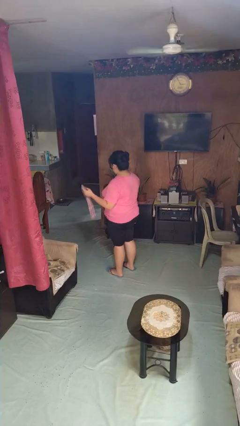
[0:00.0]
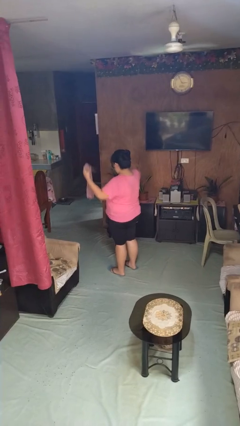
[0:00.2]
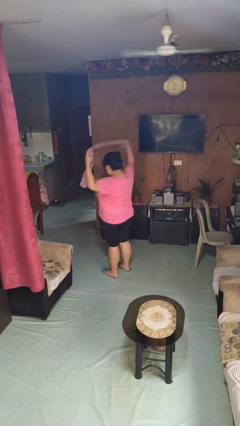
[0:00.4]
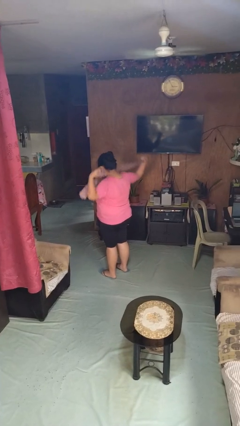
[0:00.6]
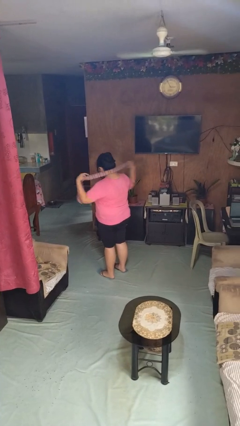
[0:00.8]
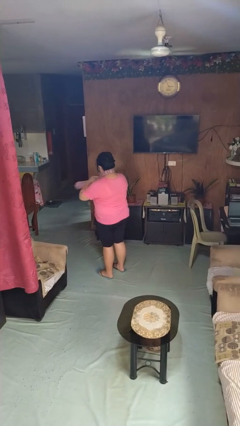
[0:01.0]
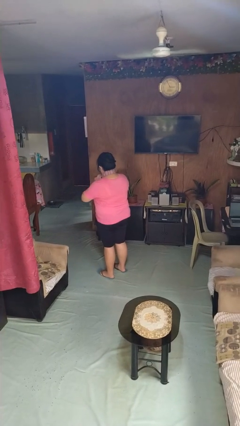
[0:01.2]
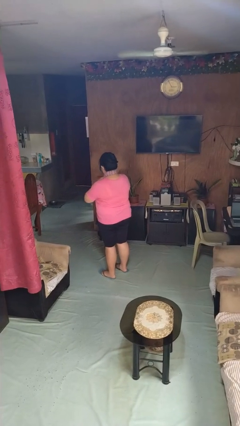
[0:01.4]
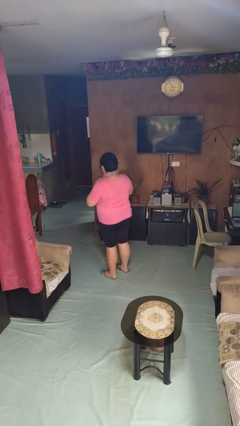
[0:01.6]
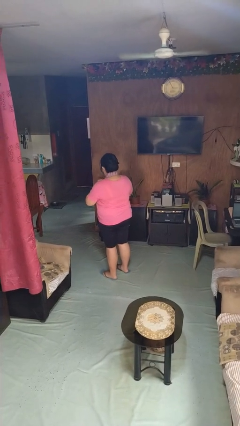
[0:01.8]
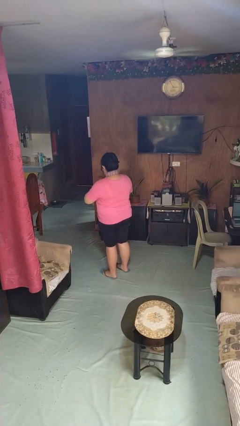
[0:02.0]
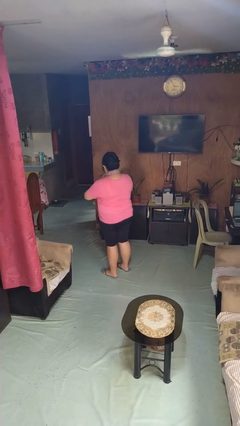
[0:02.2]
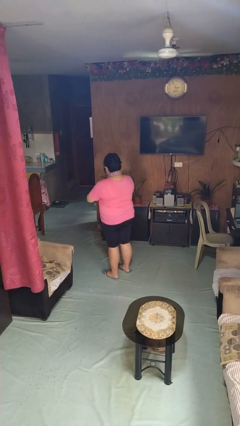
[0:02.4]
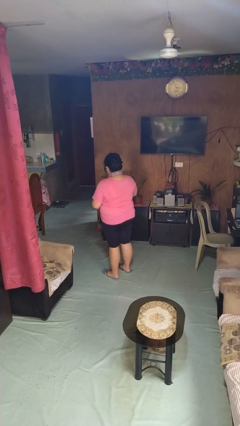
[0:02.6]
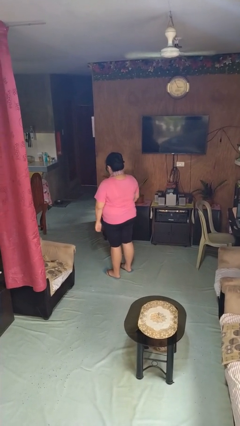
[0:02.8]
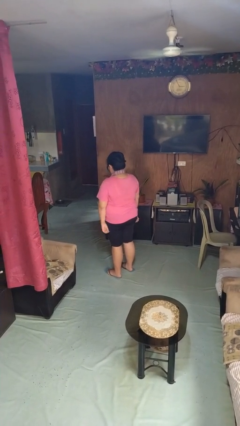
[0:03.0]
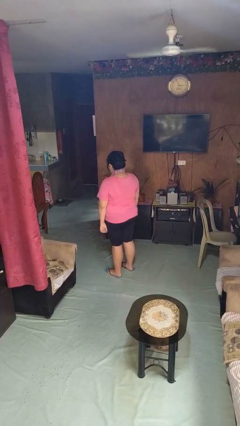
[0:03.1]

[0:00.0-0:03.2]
person puts on necktie

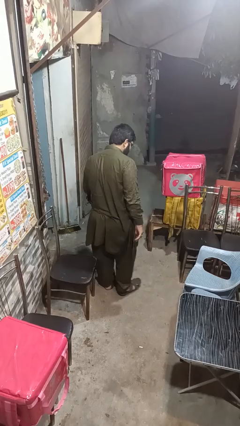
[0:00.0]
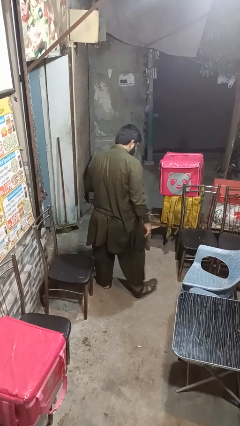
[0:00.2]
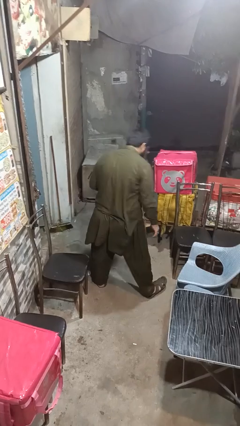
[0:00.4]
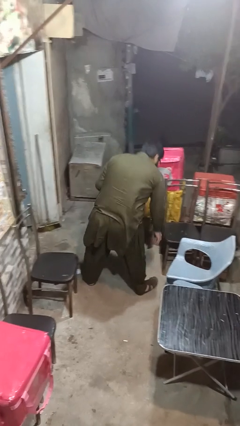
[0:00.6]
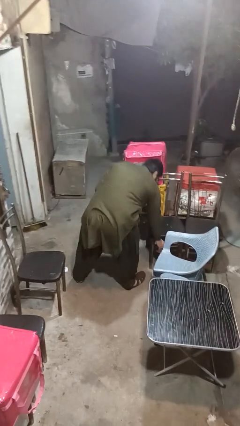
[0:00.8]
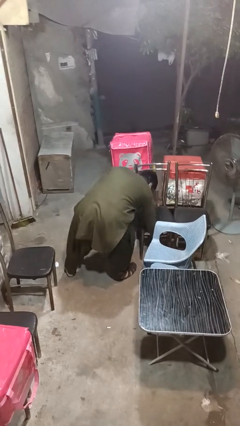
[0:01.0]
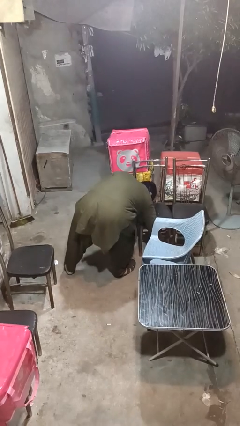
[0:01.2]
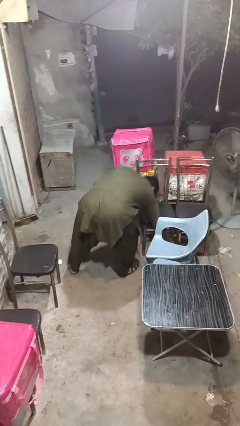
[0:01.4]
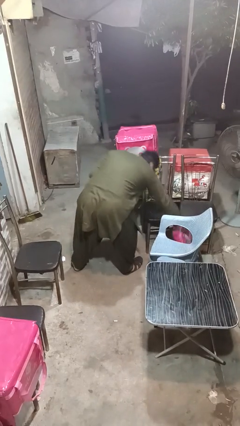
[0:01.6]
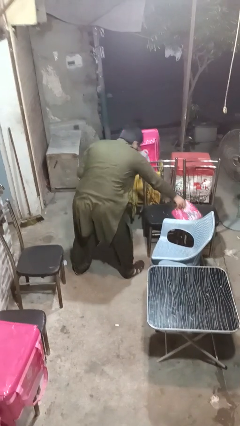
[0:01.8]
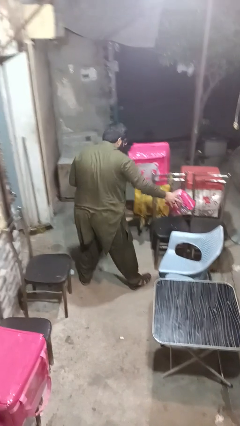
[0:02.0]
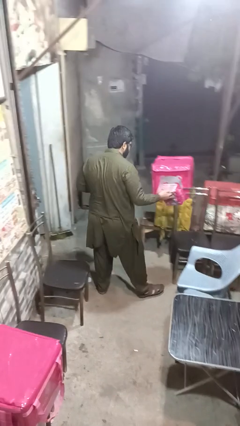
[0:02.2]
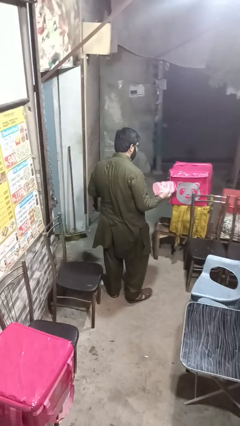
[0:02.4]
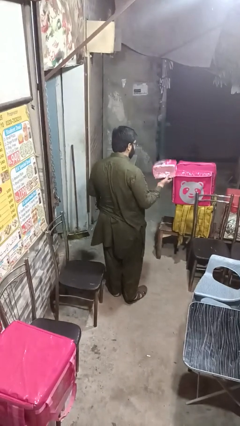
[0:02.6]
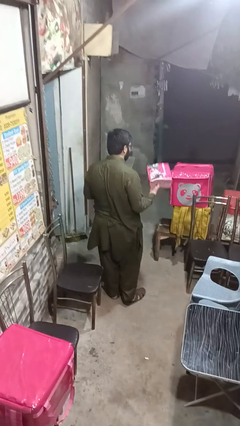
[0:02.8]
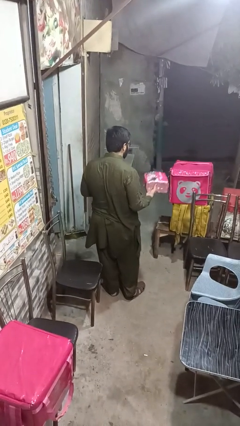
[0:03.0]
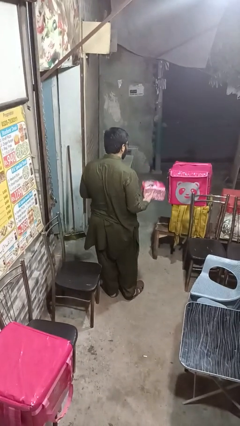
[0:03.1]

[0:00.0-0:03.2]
person picks up object from floor

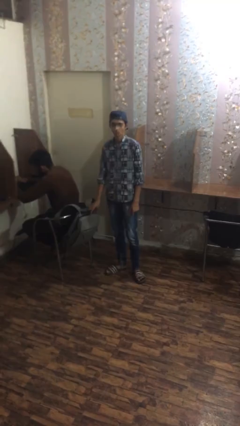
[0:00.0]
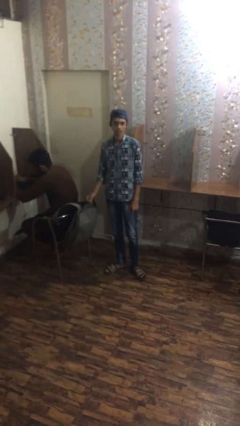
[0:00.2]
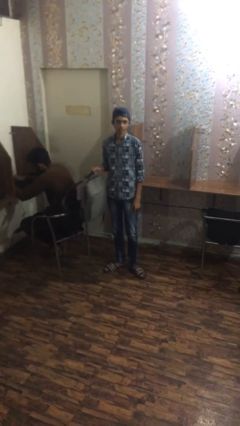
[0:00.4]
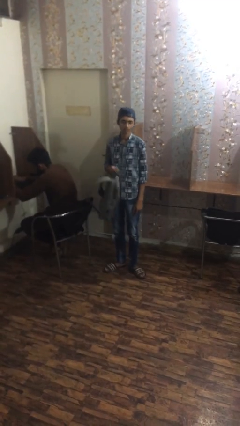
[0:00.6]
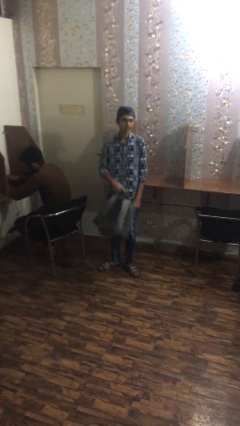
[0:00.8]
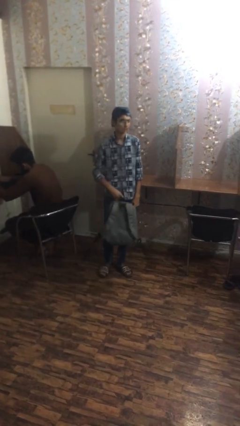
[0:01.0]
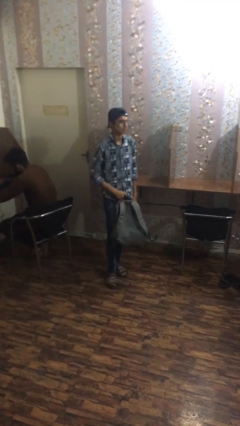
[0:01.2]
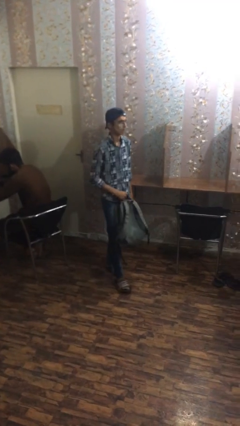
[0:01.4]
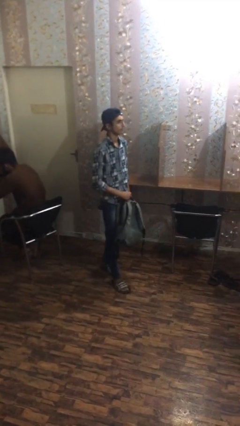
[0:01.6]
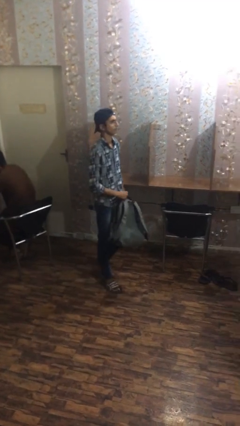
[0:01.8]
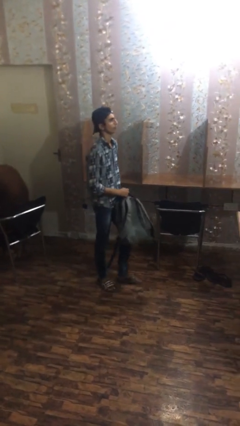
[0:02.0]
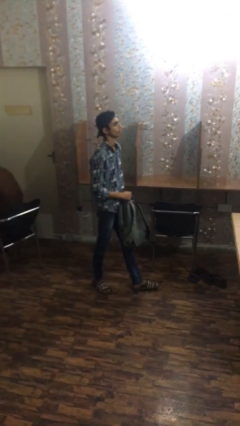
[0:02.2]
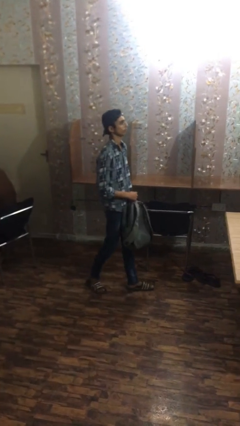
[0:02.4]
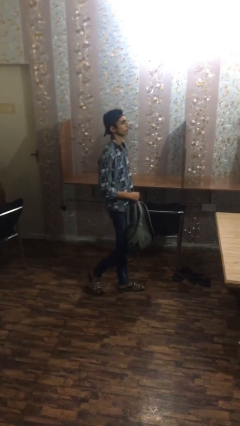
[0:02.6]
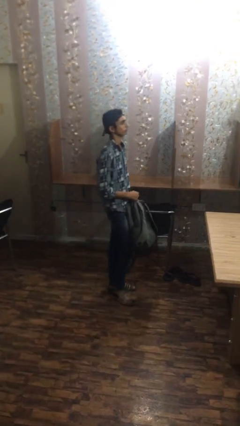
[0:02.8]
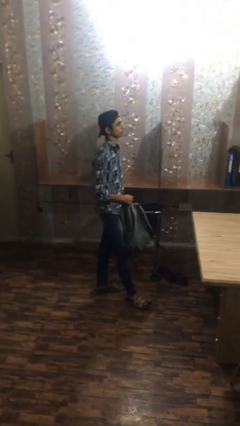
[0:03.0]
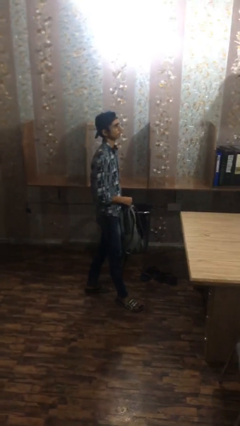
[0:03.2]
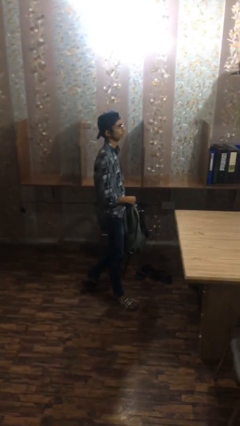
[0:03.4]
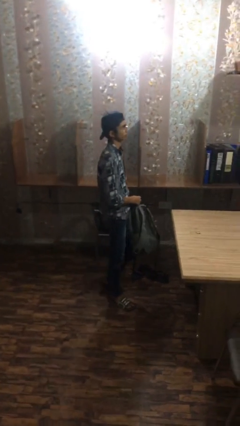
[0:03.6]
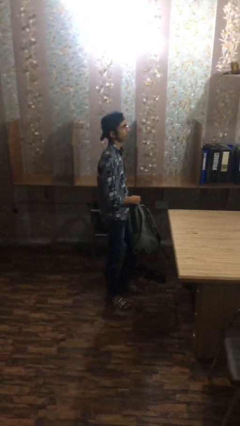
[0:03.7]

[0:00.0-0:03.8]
person steals object from person

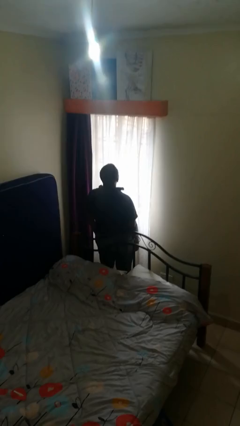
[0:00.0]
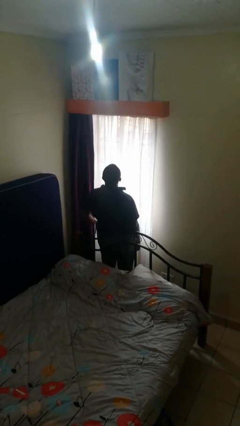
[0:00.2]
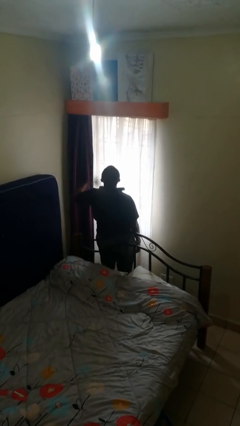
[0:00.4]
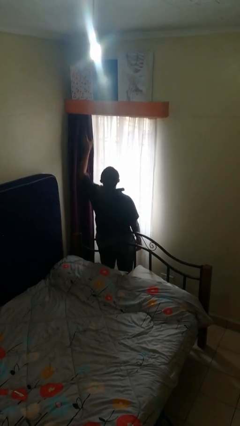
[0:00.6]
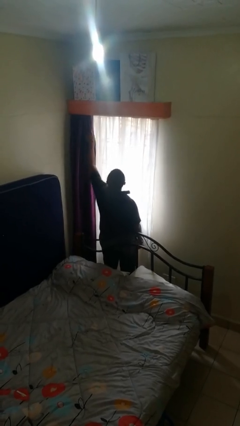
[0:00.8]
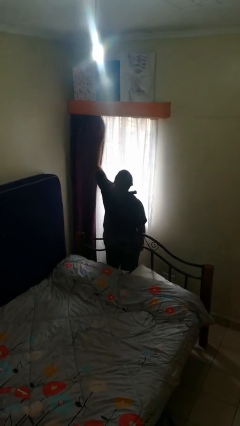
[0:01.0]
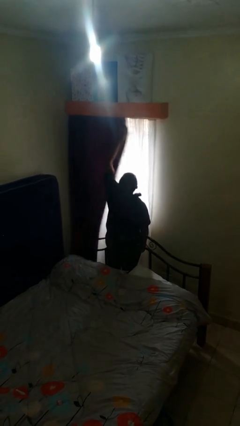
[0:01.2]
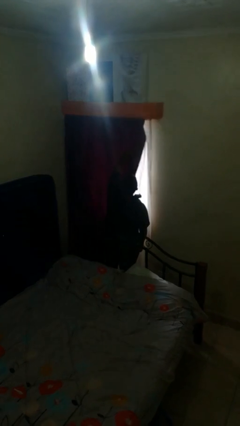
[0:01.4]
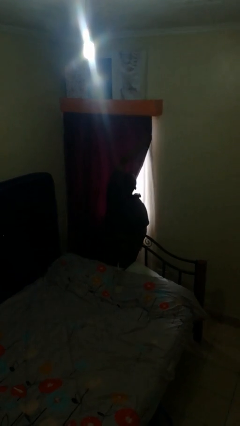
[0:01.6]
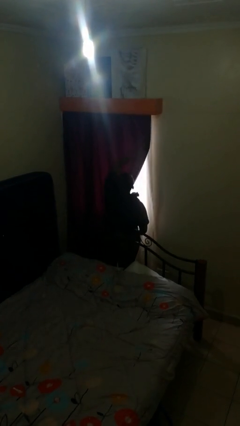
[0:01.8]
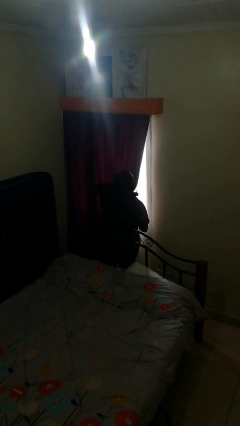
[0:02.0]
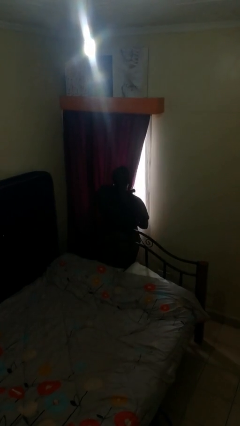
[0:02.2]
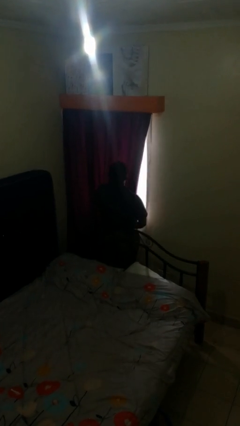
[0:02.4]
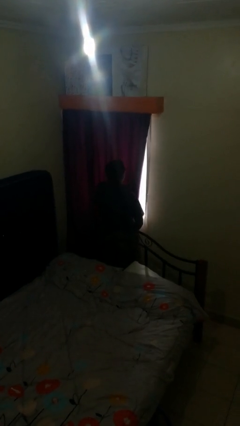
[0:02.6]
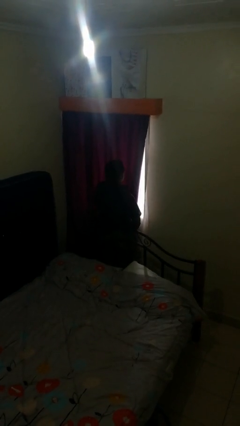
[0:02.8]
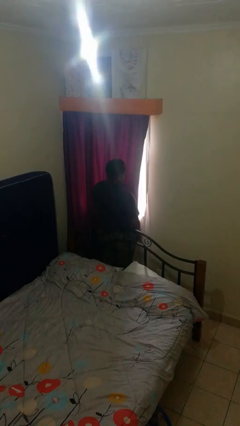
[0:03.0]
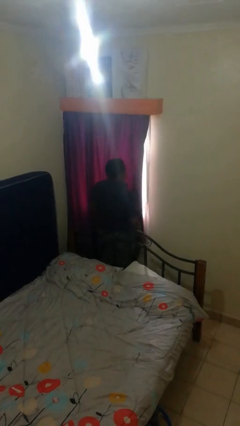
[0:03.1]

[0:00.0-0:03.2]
person closes curtains

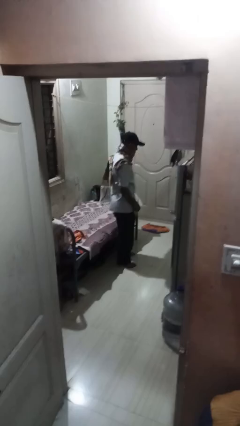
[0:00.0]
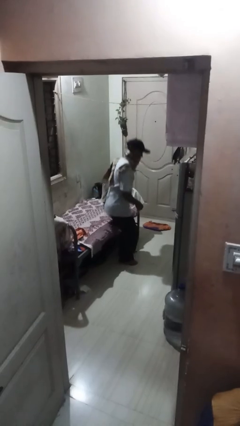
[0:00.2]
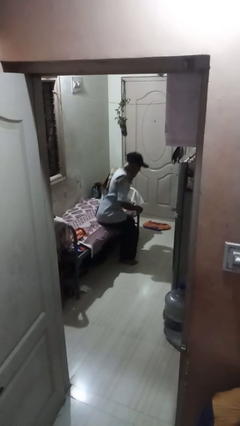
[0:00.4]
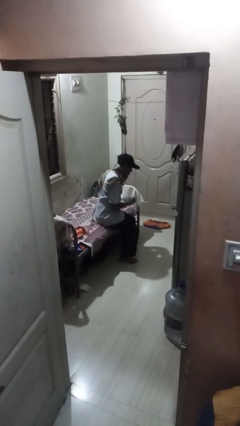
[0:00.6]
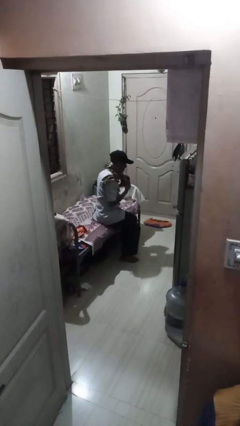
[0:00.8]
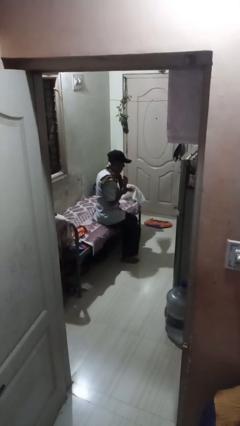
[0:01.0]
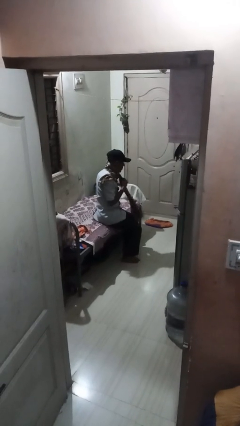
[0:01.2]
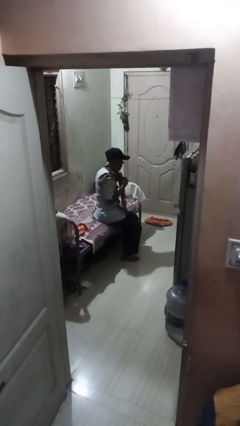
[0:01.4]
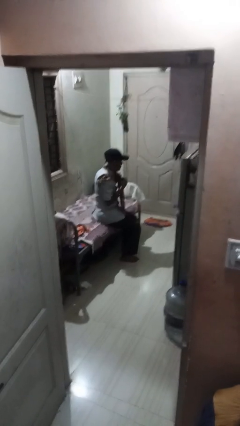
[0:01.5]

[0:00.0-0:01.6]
person puts on scarf

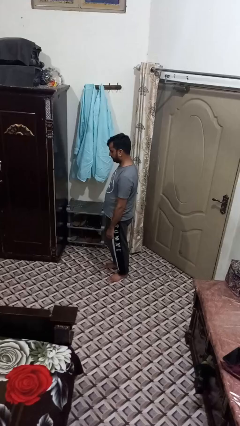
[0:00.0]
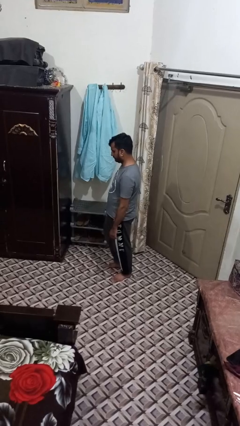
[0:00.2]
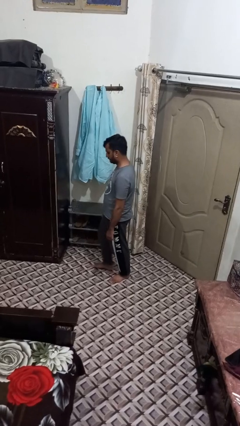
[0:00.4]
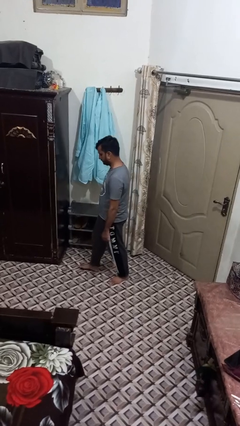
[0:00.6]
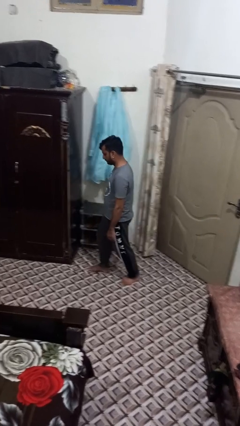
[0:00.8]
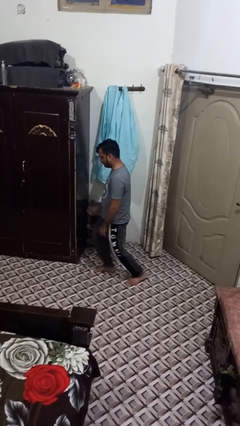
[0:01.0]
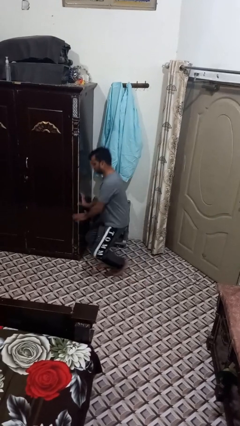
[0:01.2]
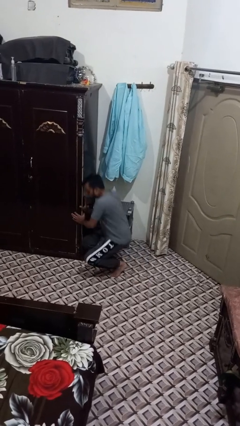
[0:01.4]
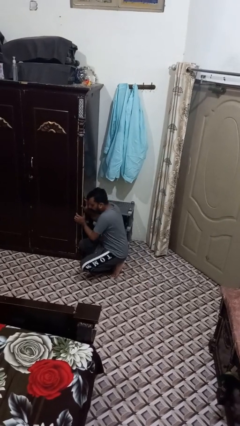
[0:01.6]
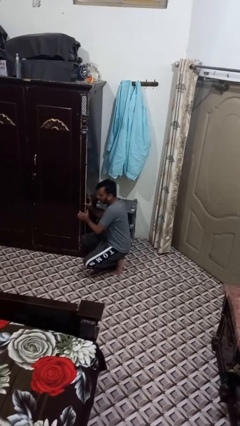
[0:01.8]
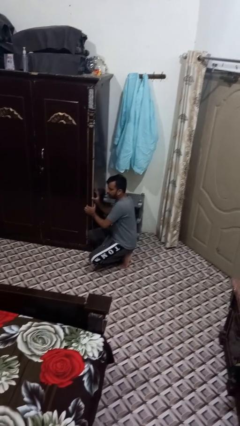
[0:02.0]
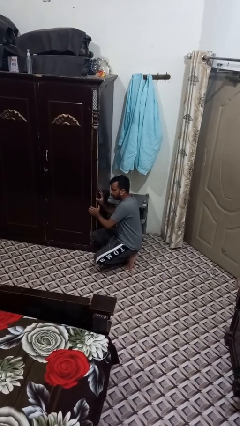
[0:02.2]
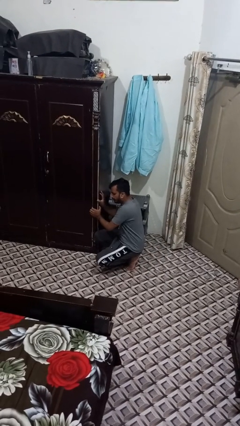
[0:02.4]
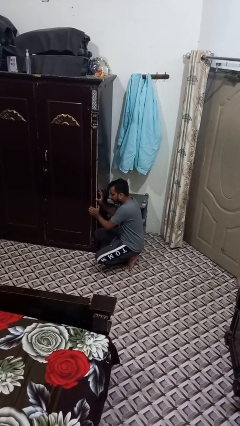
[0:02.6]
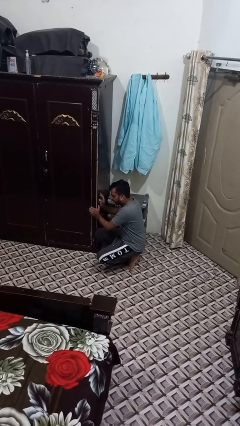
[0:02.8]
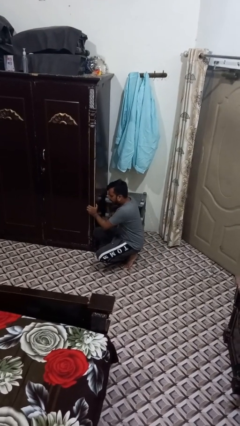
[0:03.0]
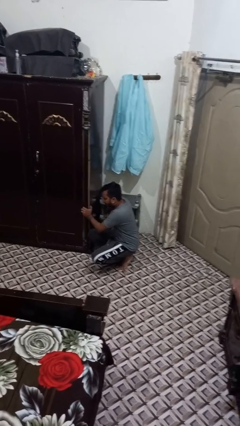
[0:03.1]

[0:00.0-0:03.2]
person trips on object on floor
